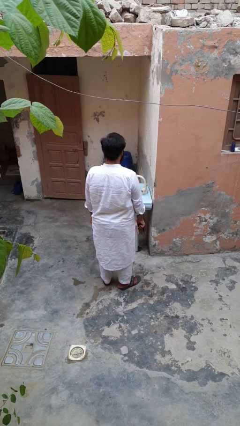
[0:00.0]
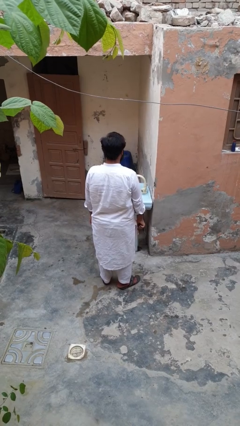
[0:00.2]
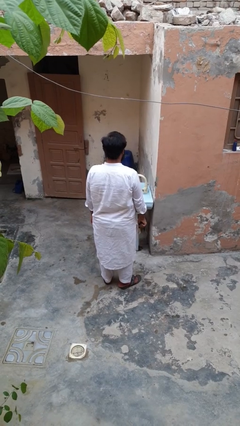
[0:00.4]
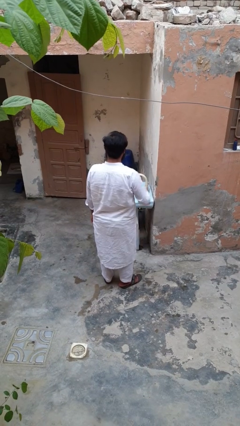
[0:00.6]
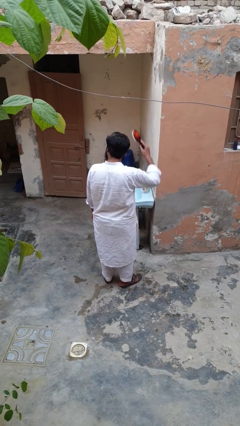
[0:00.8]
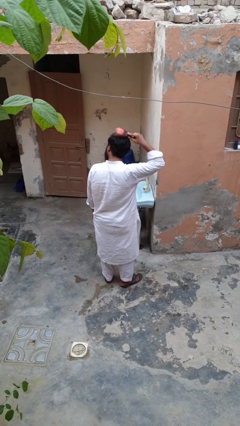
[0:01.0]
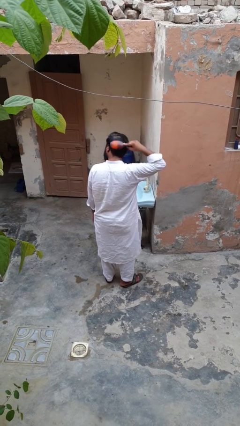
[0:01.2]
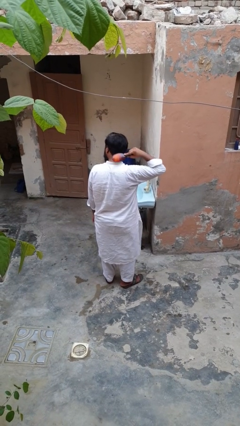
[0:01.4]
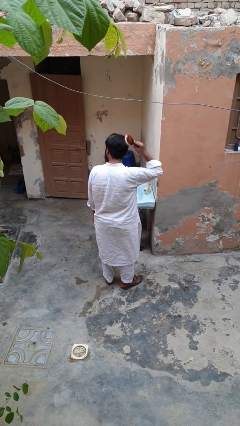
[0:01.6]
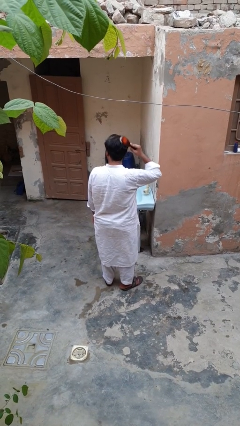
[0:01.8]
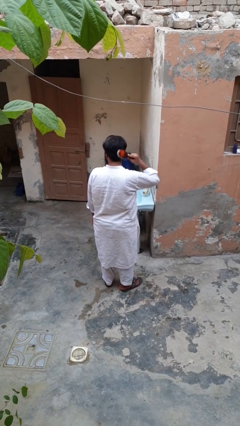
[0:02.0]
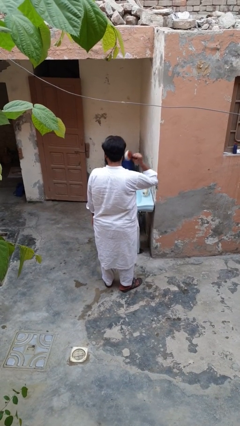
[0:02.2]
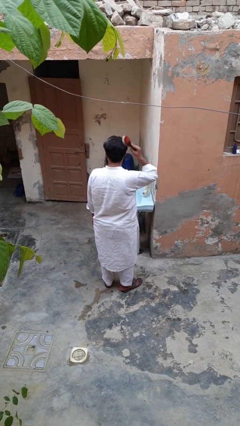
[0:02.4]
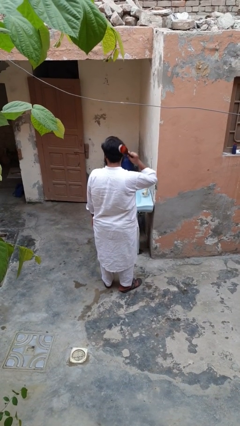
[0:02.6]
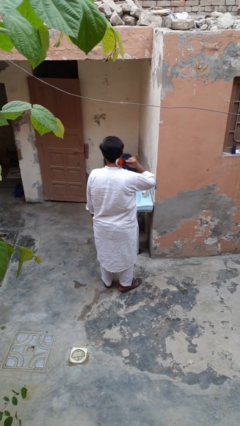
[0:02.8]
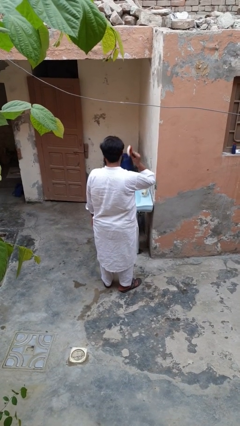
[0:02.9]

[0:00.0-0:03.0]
person brushes hair

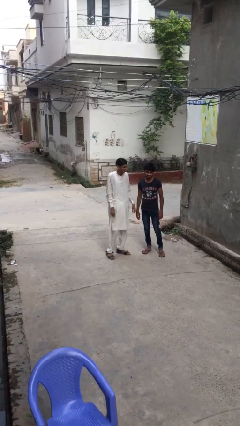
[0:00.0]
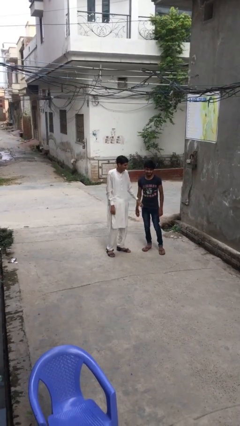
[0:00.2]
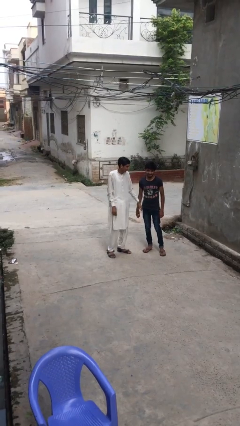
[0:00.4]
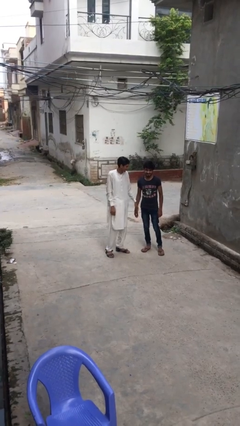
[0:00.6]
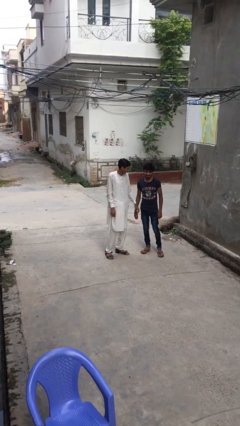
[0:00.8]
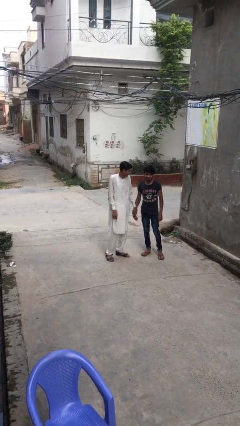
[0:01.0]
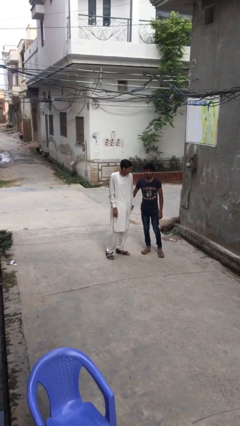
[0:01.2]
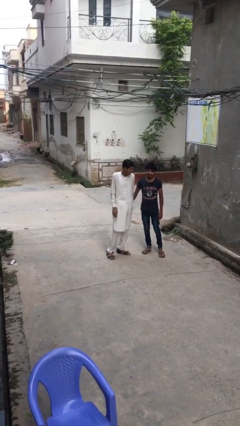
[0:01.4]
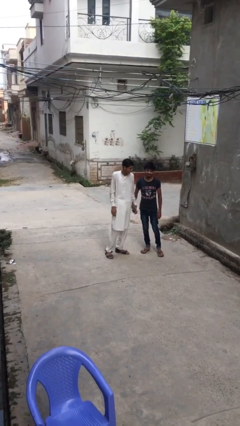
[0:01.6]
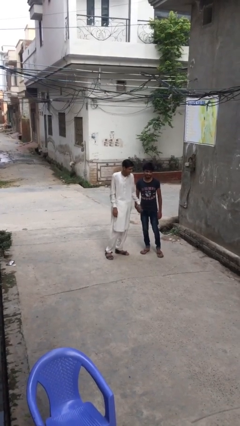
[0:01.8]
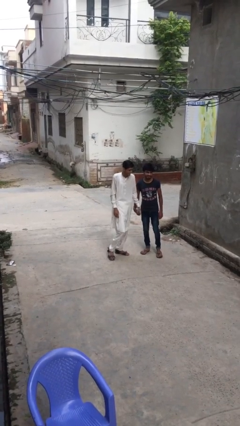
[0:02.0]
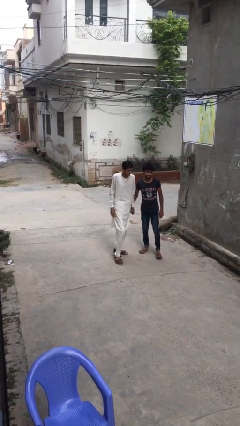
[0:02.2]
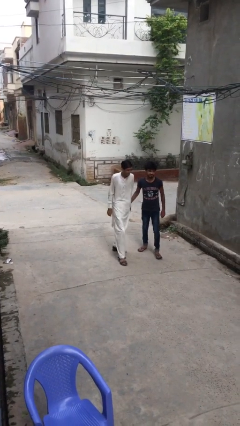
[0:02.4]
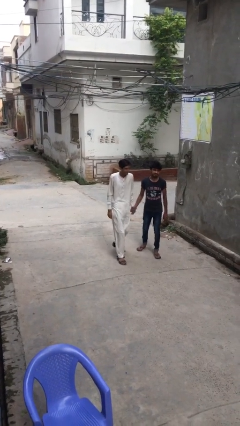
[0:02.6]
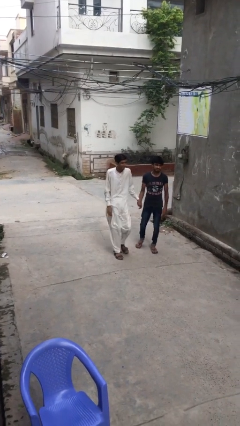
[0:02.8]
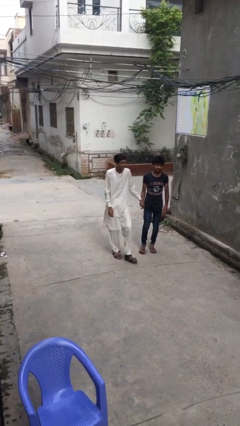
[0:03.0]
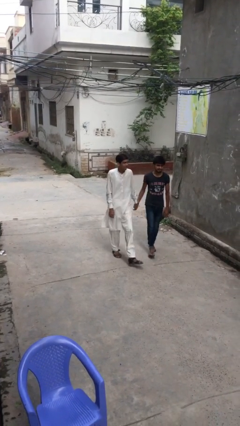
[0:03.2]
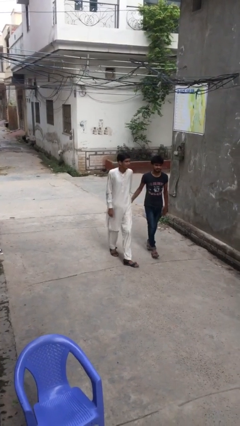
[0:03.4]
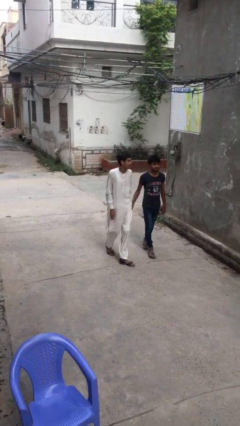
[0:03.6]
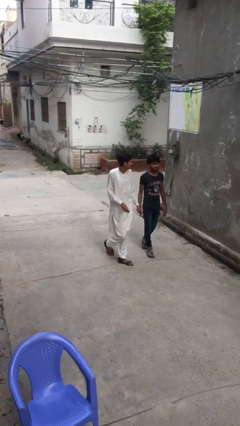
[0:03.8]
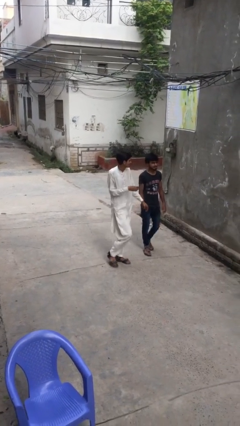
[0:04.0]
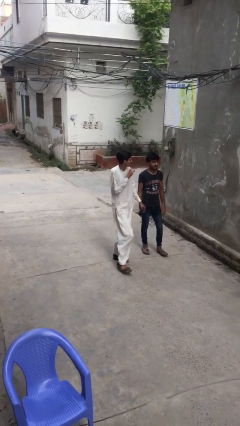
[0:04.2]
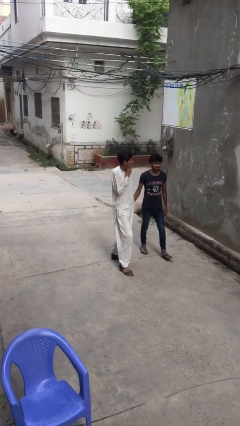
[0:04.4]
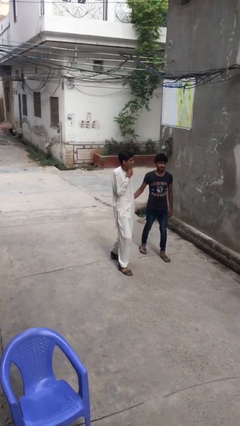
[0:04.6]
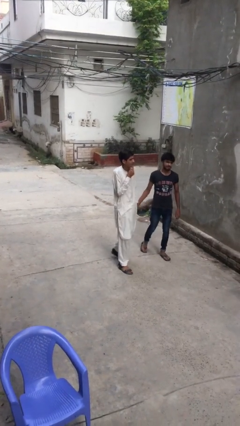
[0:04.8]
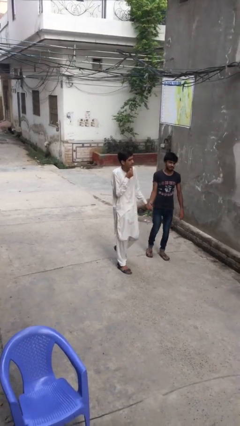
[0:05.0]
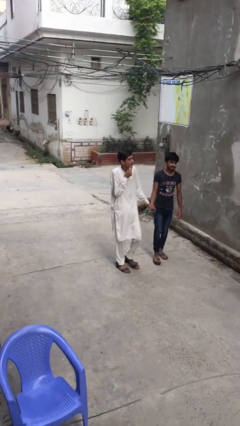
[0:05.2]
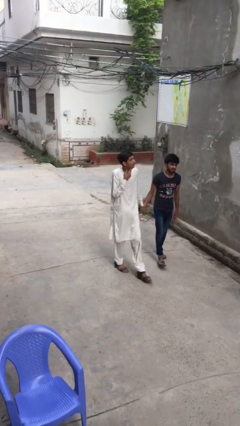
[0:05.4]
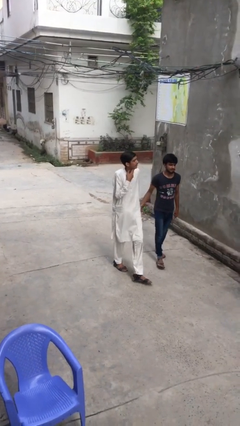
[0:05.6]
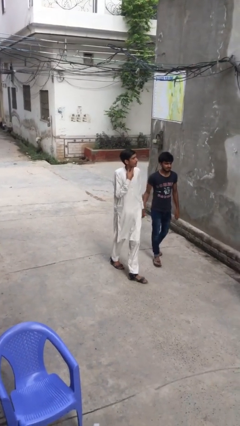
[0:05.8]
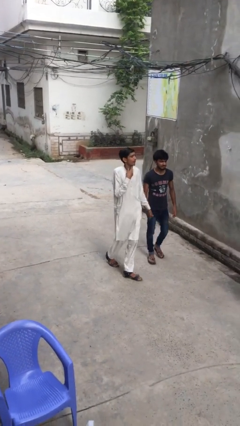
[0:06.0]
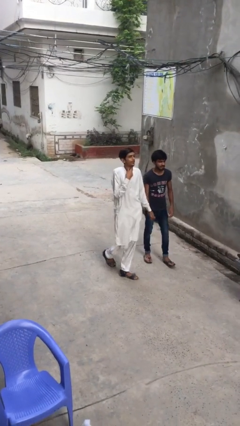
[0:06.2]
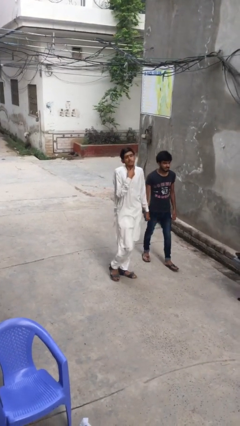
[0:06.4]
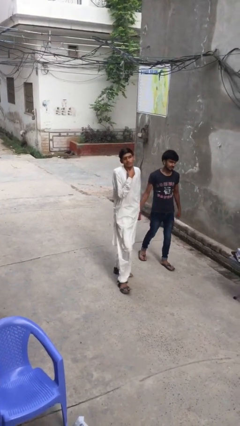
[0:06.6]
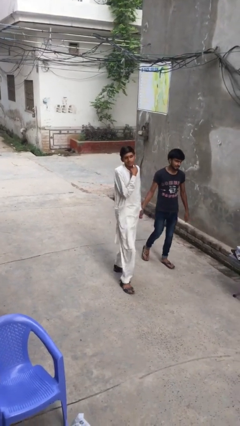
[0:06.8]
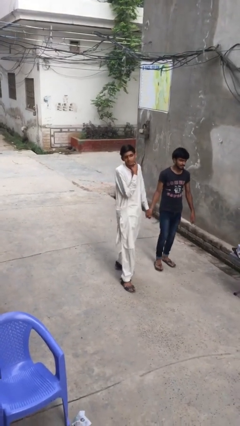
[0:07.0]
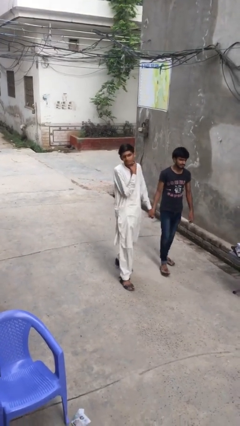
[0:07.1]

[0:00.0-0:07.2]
person holds hand

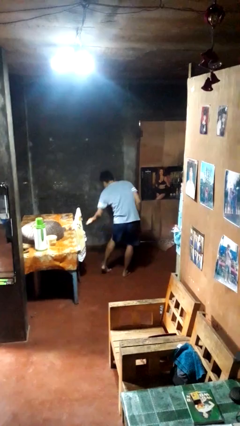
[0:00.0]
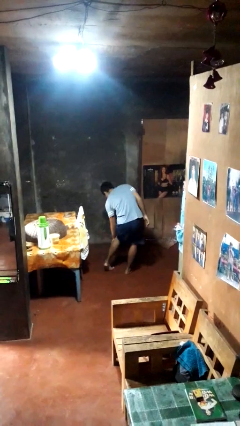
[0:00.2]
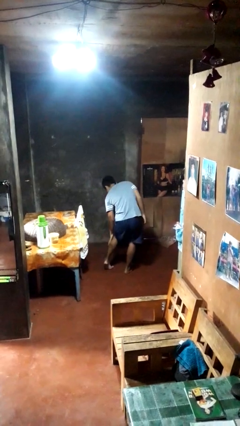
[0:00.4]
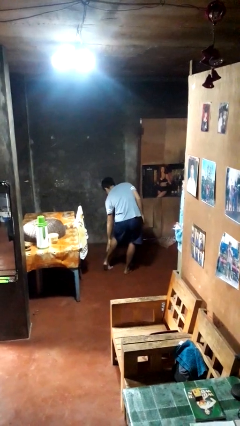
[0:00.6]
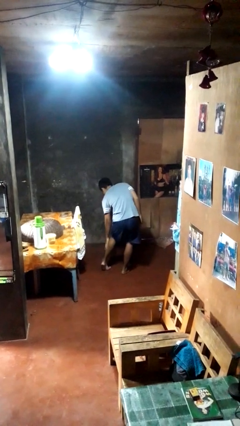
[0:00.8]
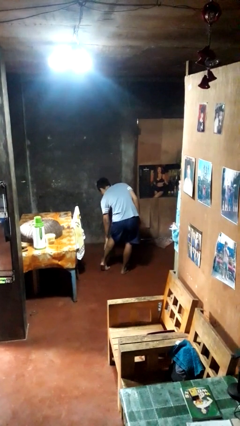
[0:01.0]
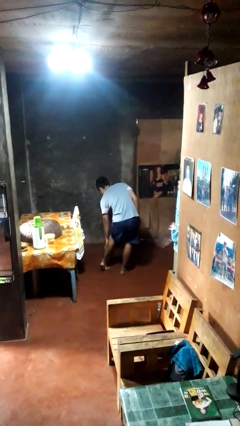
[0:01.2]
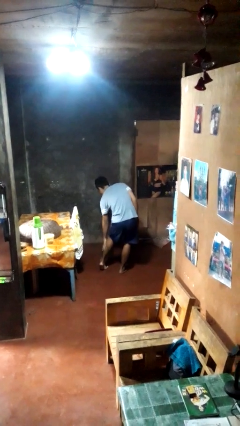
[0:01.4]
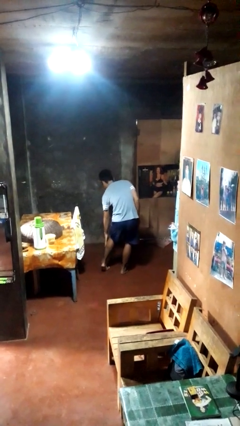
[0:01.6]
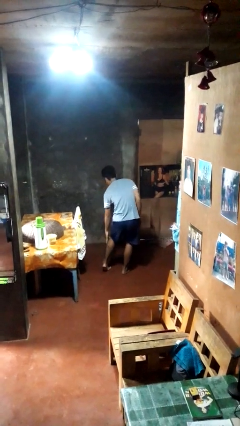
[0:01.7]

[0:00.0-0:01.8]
person swats bug

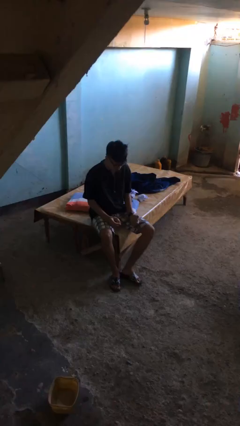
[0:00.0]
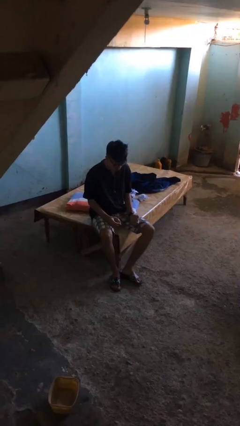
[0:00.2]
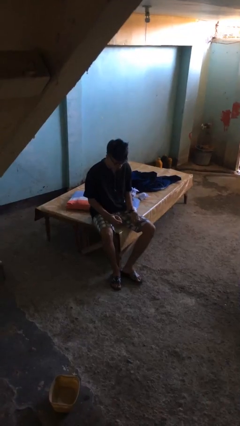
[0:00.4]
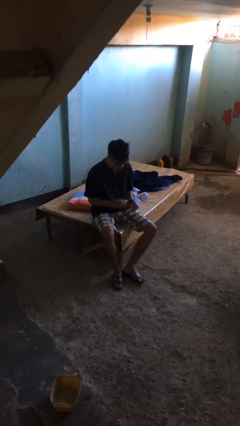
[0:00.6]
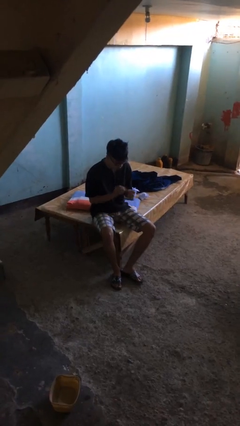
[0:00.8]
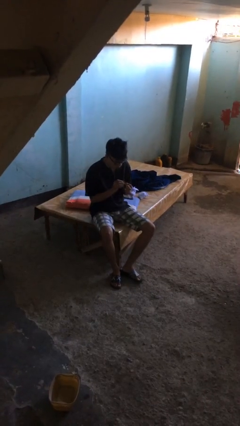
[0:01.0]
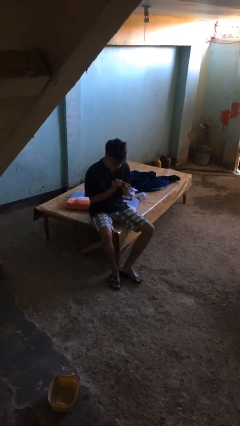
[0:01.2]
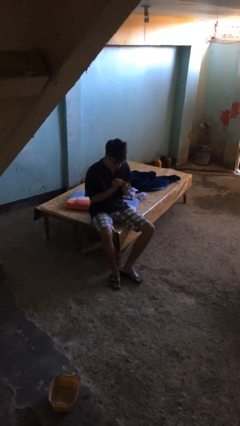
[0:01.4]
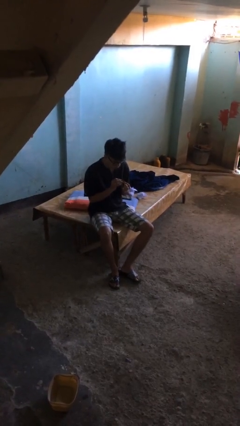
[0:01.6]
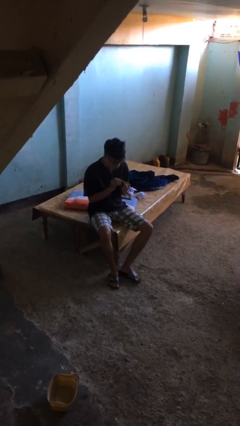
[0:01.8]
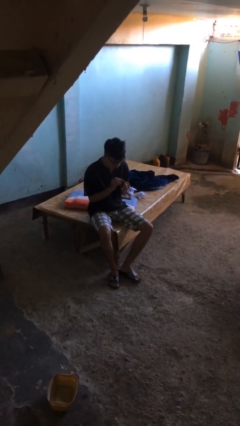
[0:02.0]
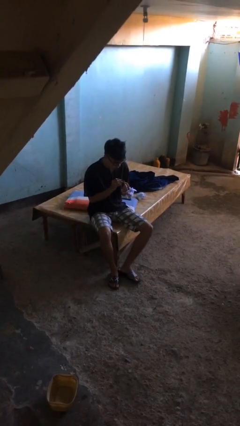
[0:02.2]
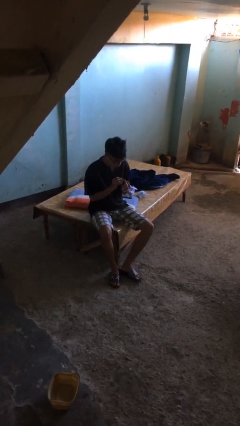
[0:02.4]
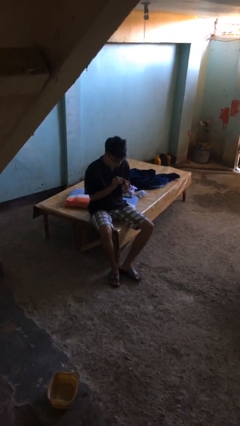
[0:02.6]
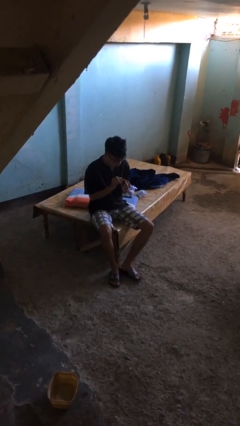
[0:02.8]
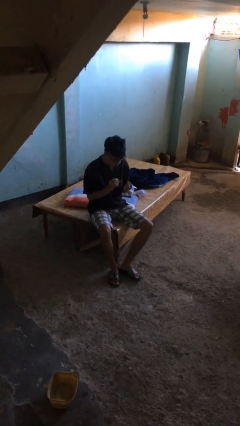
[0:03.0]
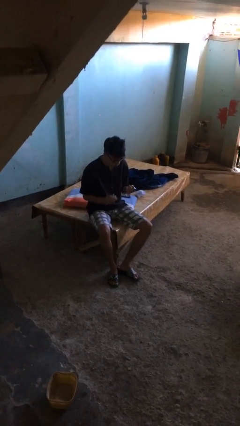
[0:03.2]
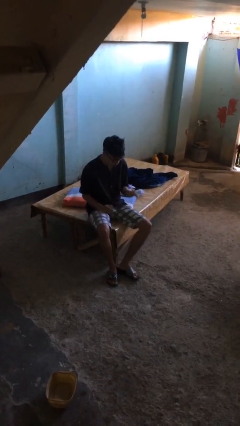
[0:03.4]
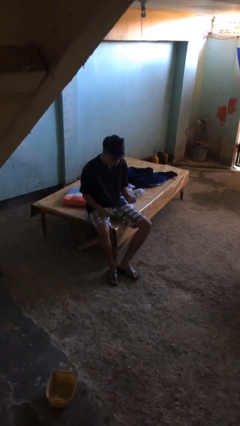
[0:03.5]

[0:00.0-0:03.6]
person clips fingernails

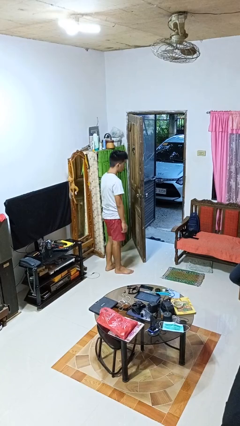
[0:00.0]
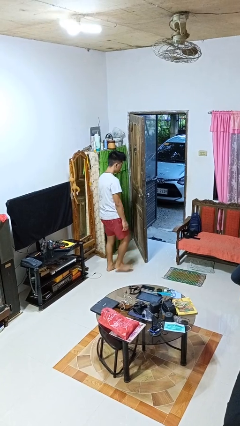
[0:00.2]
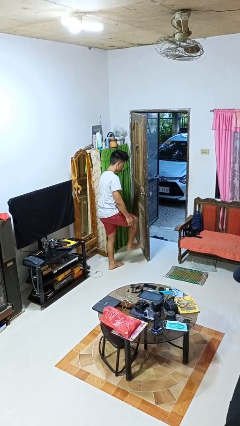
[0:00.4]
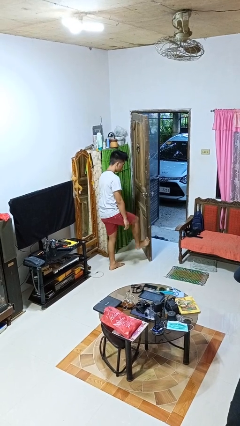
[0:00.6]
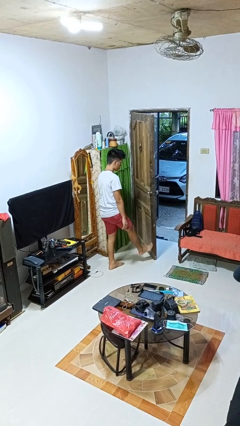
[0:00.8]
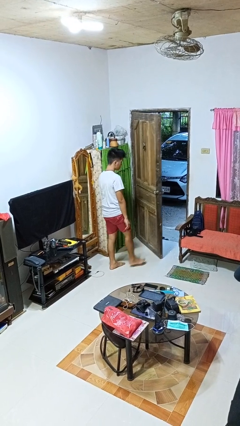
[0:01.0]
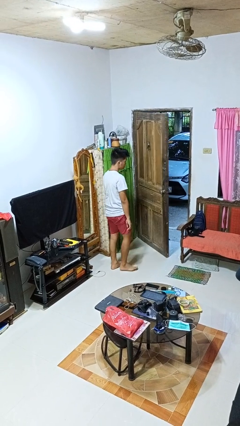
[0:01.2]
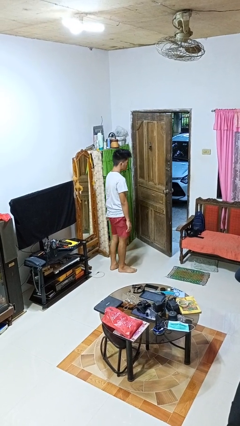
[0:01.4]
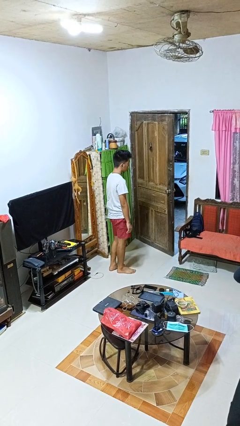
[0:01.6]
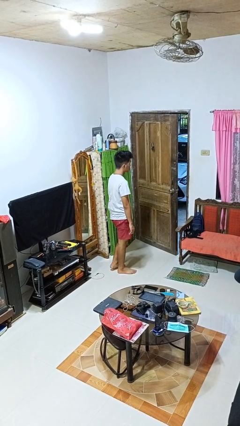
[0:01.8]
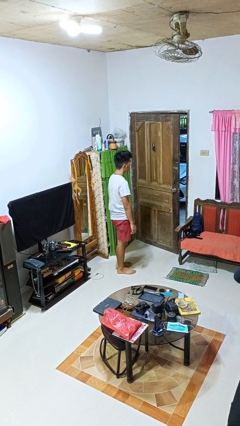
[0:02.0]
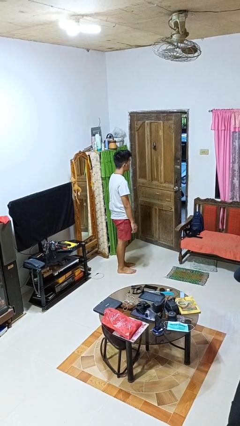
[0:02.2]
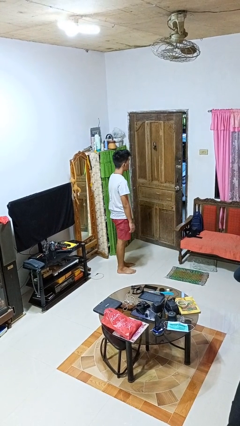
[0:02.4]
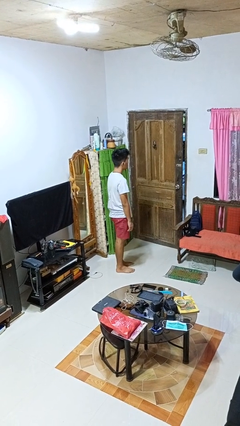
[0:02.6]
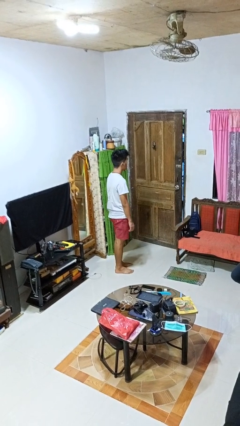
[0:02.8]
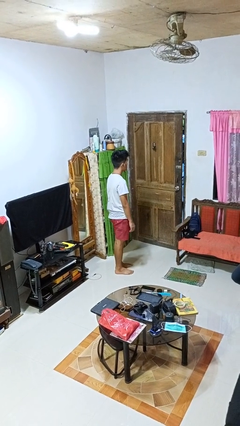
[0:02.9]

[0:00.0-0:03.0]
person closes door with foot
